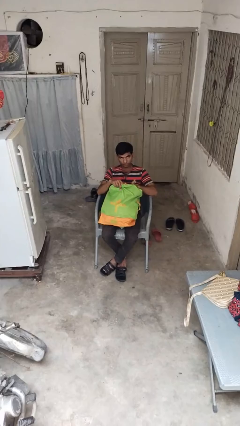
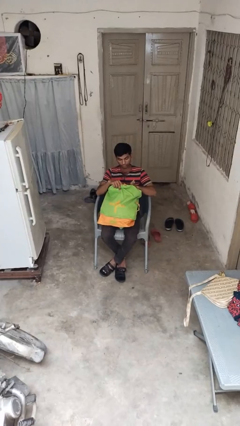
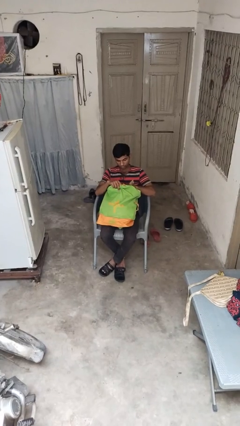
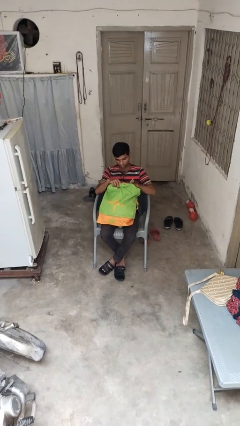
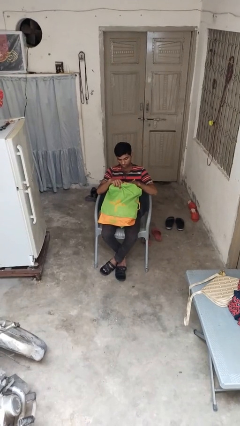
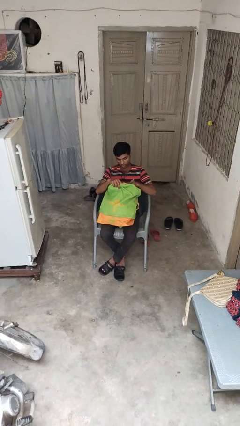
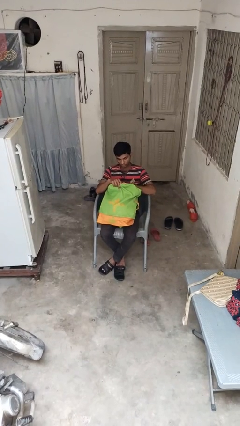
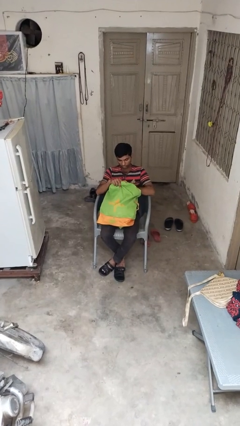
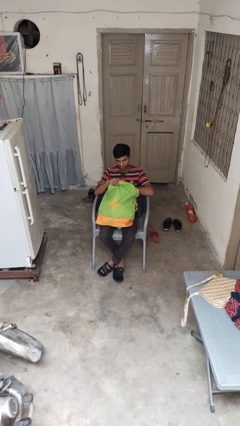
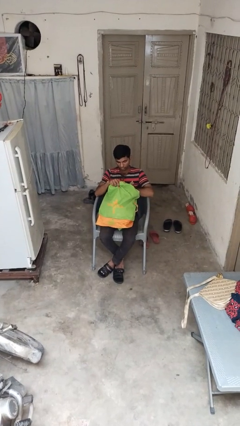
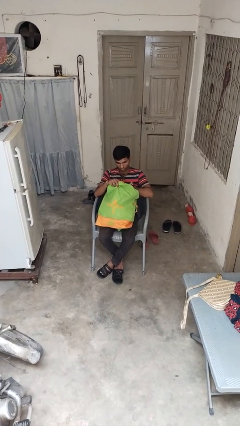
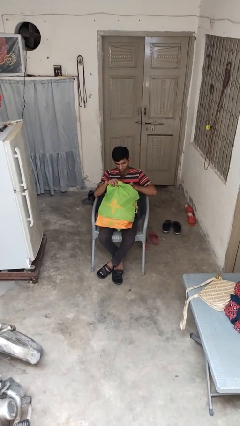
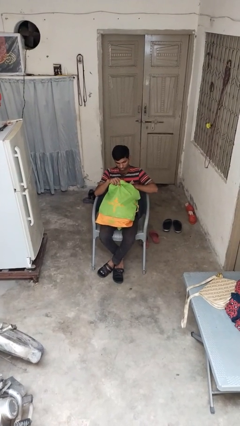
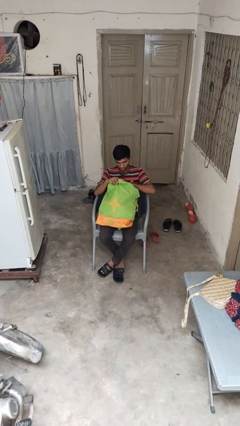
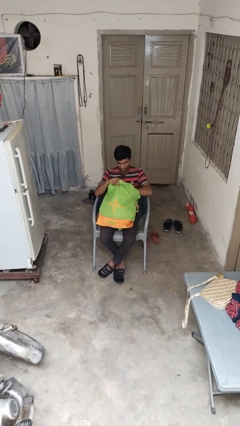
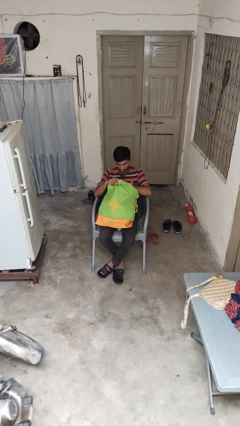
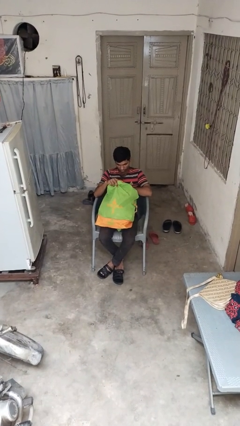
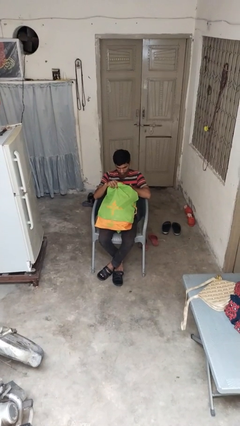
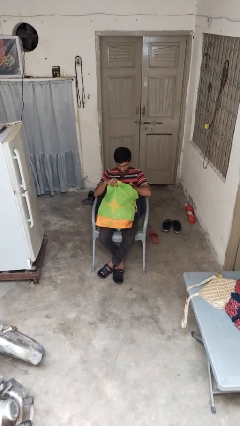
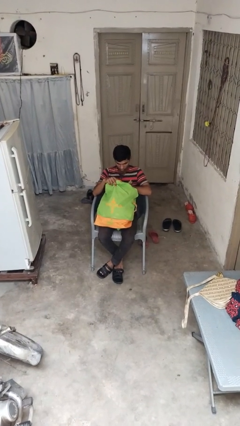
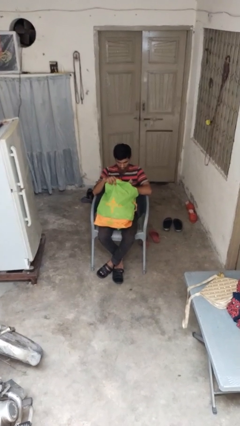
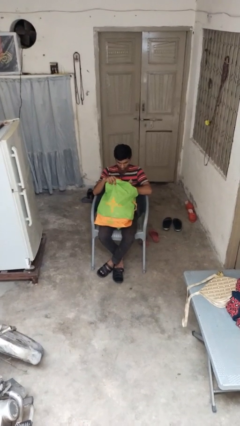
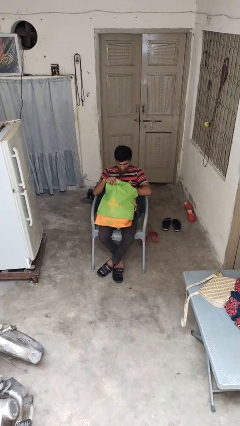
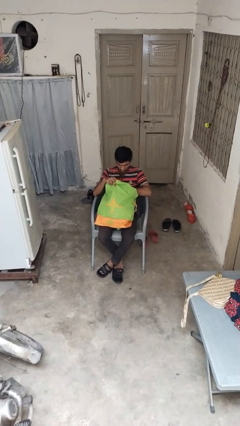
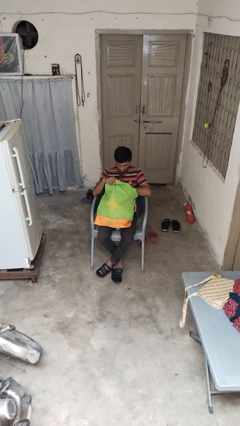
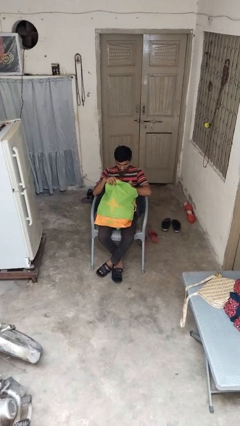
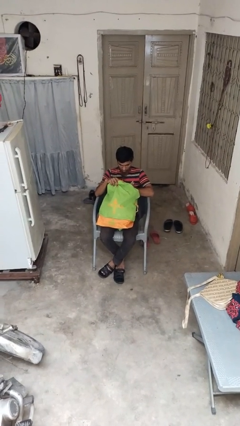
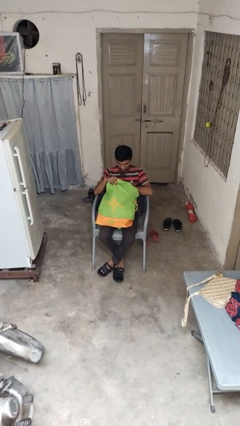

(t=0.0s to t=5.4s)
person searches in backpack

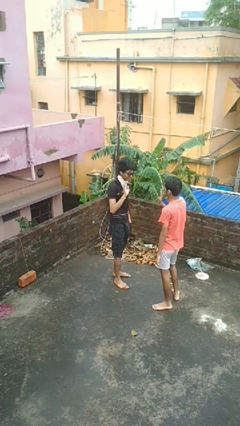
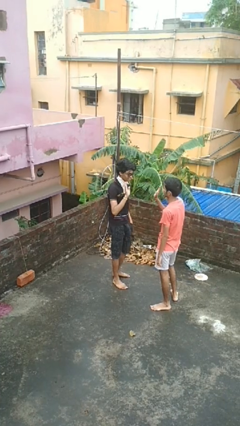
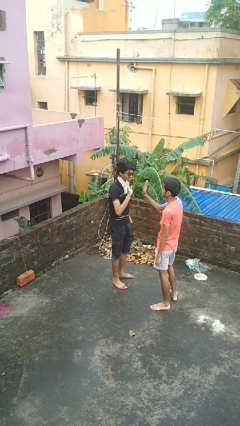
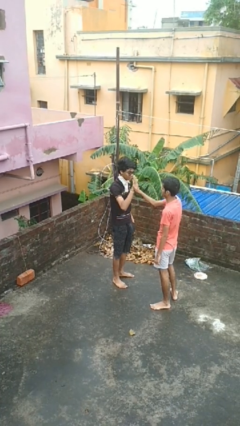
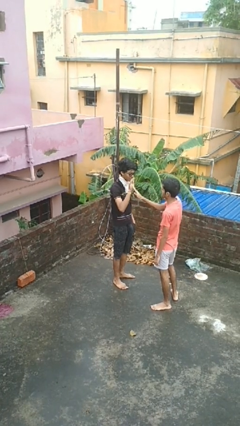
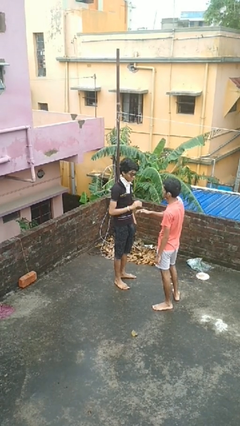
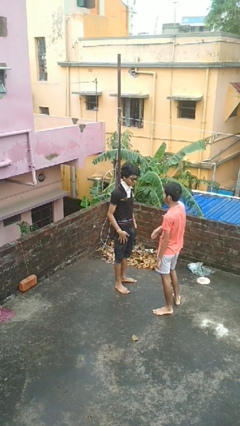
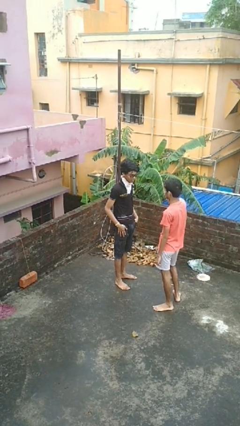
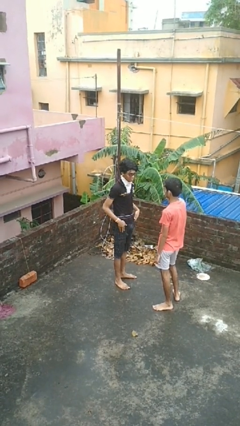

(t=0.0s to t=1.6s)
person highfives hand

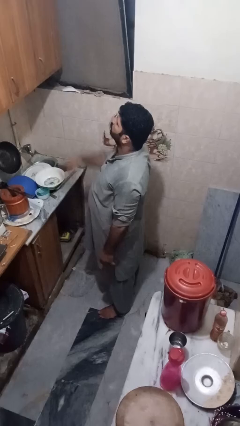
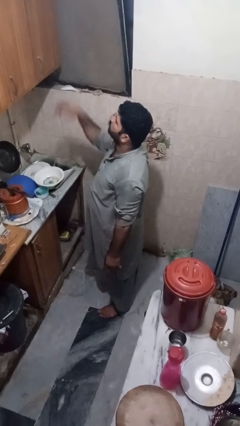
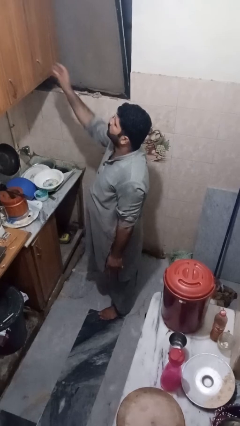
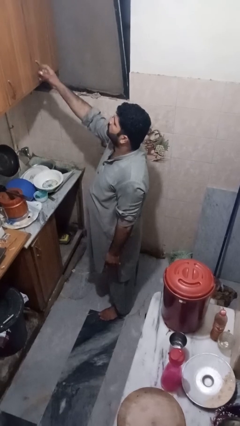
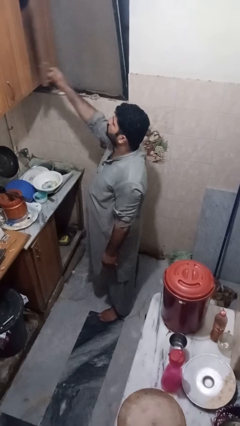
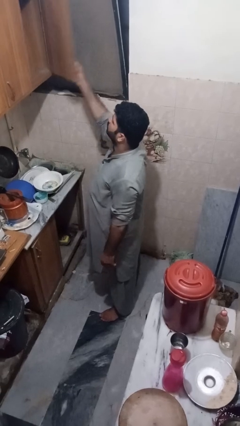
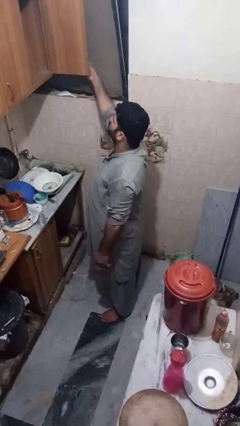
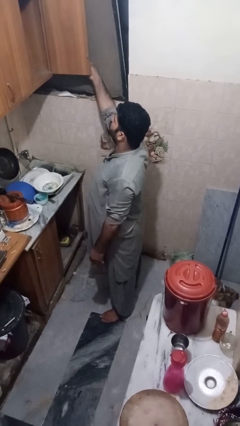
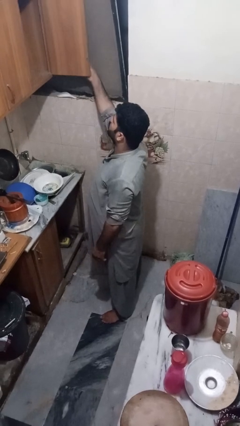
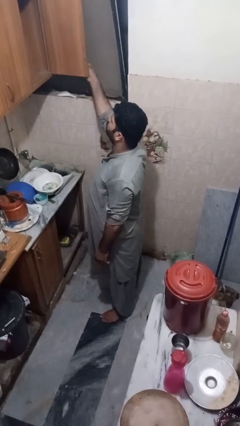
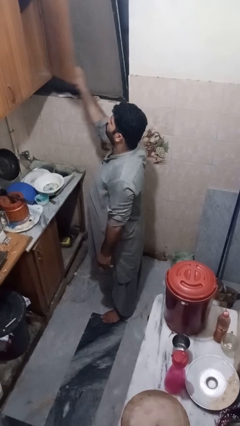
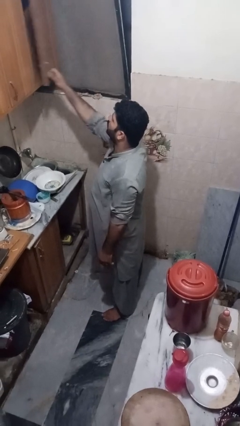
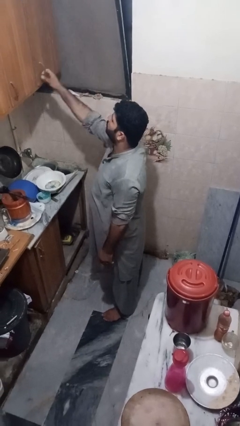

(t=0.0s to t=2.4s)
person opens cabinet

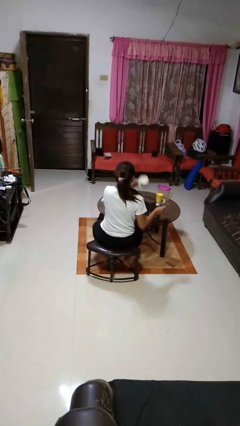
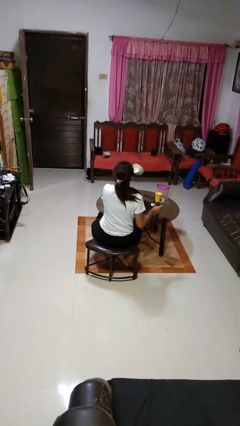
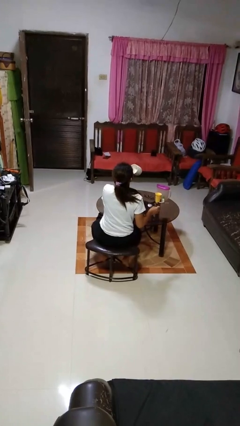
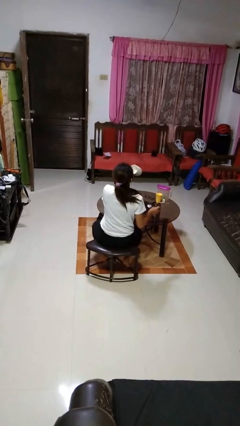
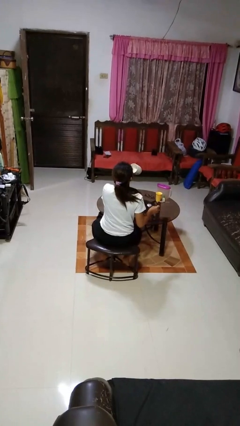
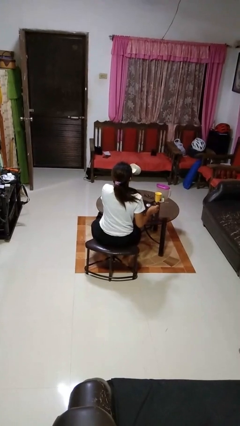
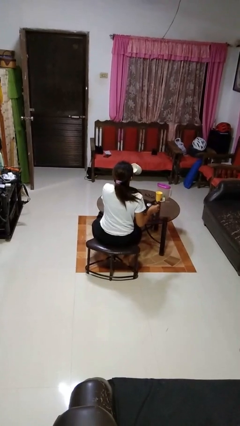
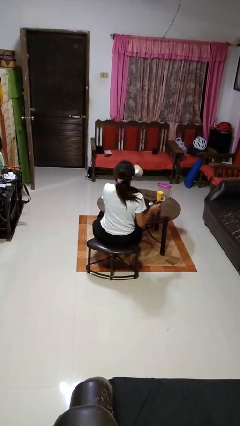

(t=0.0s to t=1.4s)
person drinks from mug

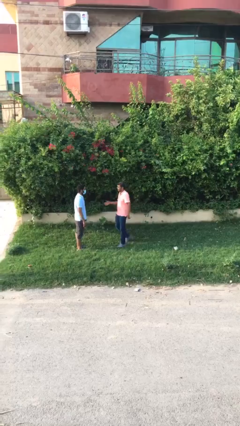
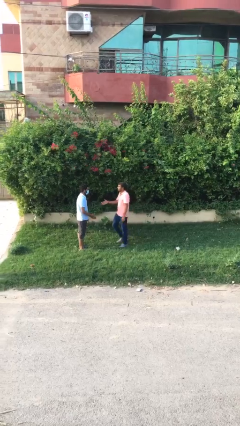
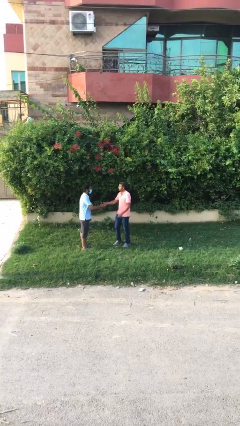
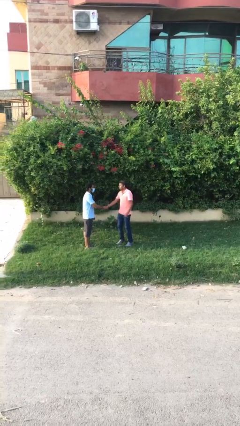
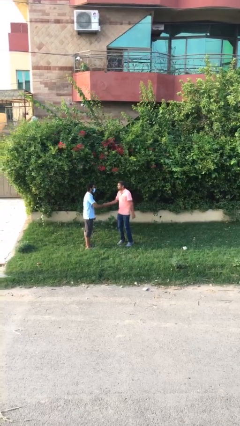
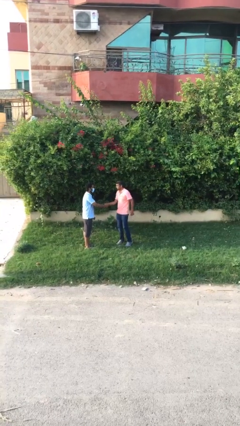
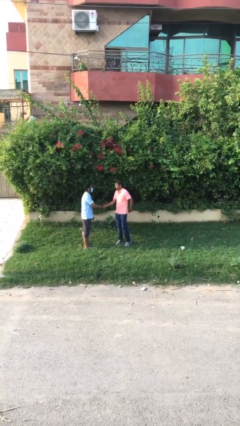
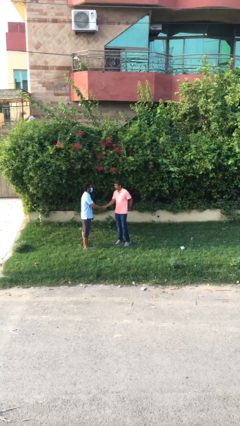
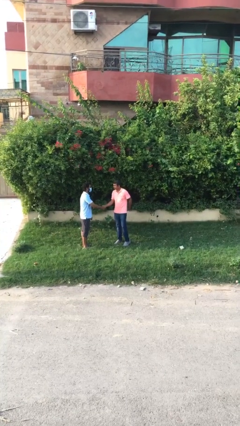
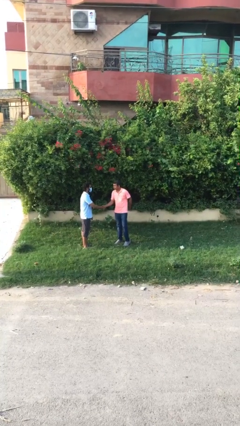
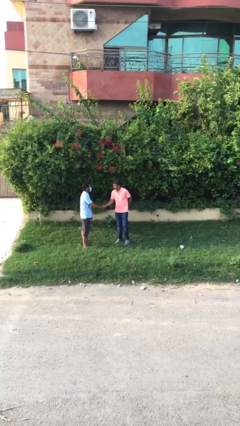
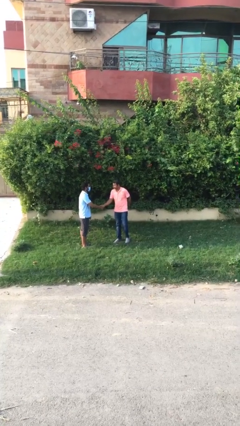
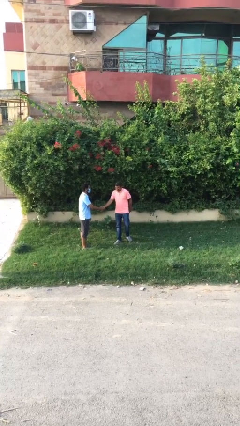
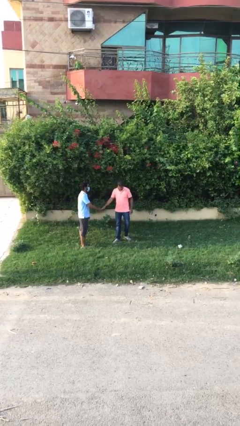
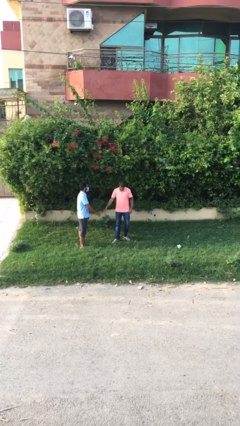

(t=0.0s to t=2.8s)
person shakes hand

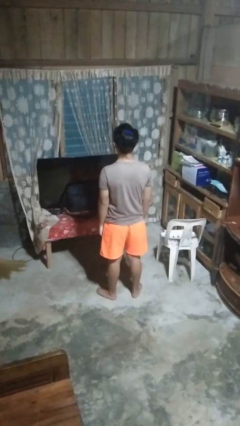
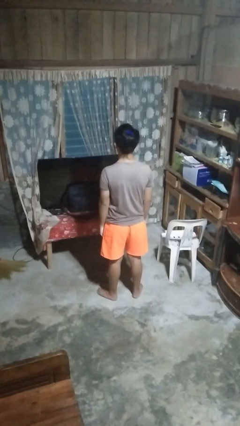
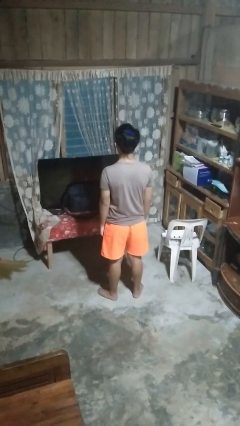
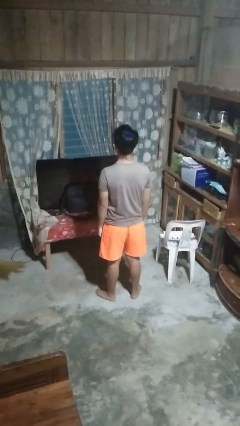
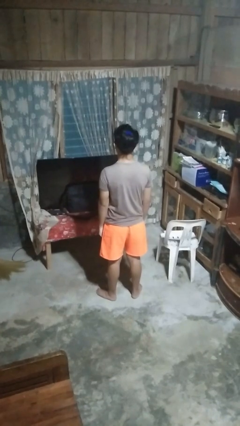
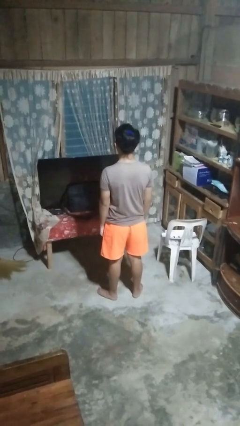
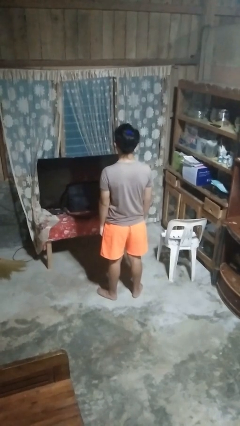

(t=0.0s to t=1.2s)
person gestures number four

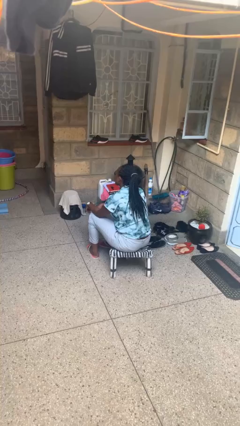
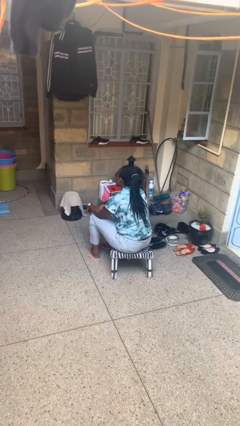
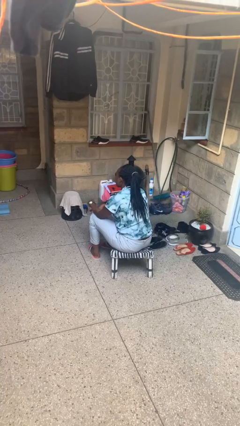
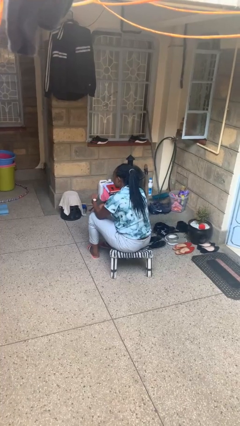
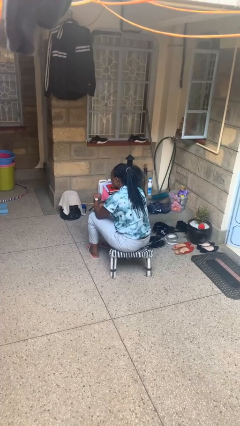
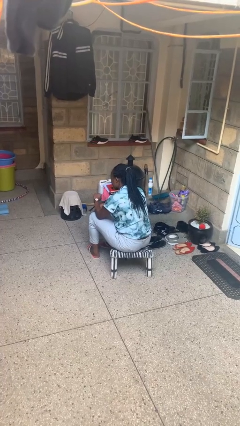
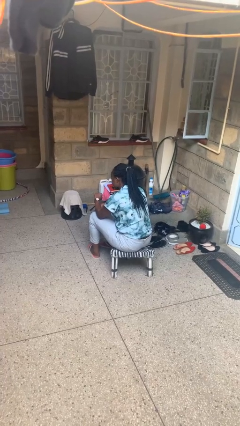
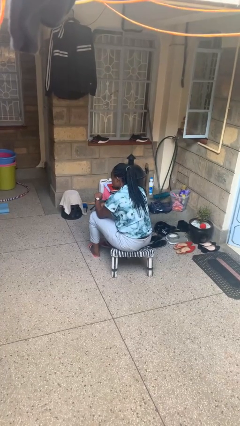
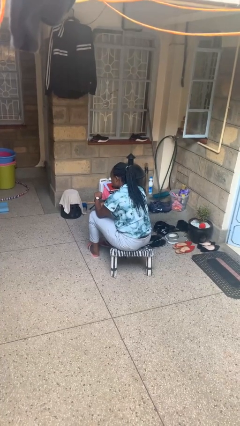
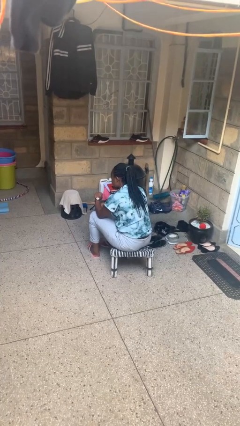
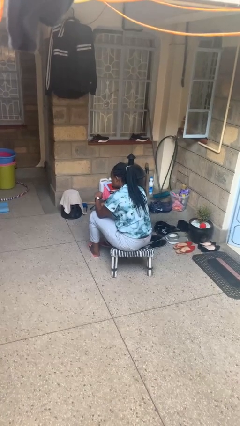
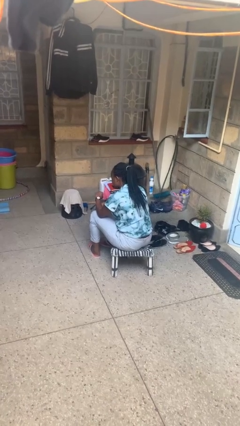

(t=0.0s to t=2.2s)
person looks at wristwatch
